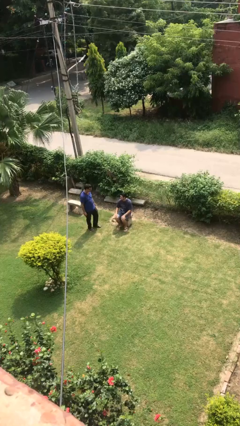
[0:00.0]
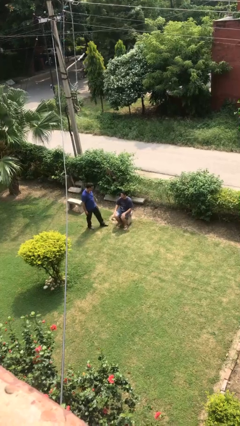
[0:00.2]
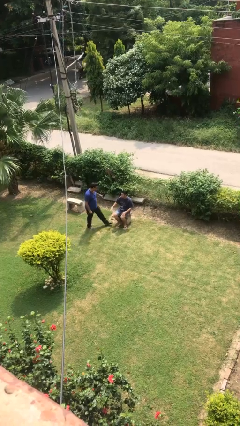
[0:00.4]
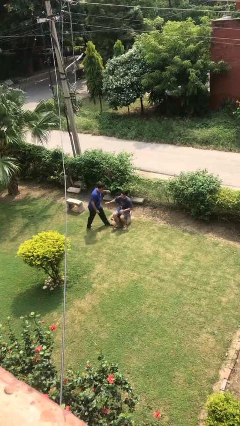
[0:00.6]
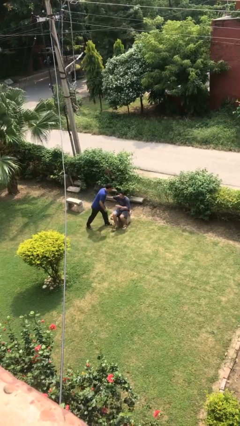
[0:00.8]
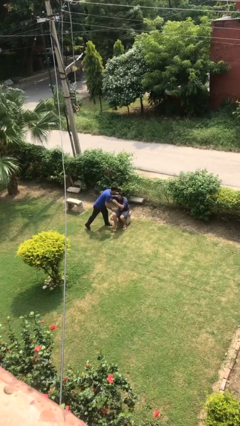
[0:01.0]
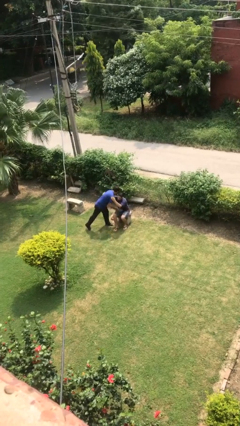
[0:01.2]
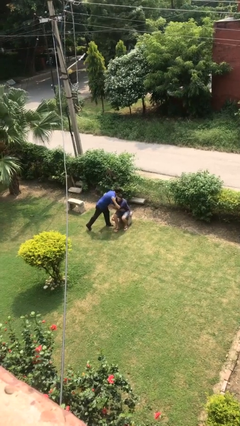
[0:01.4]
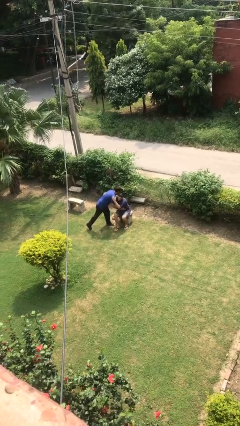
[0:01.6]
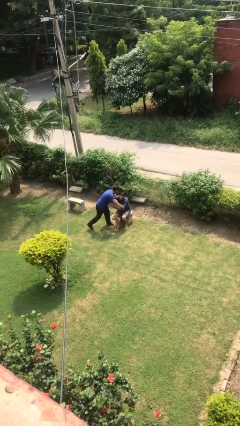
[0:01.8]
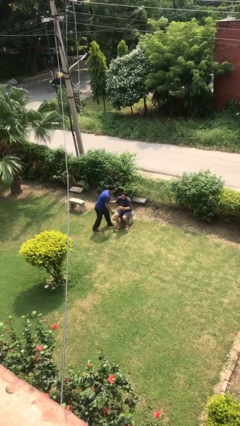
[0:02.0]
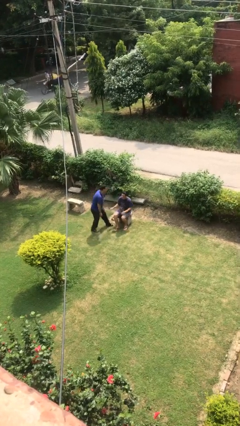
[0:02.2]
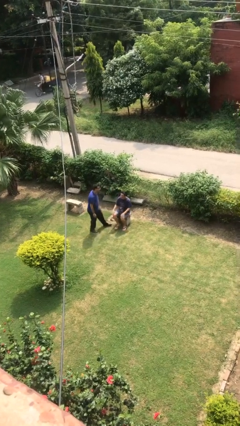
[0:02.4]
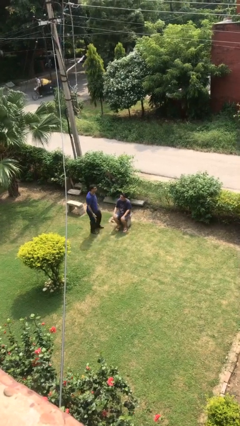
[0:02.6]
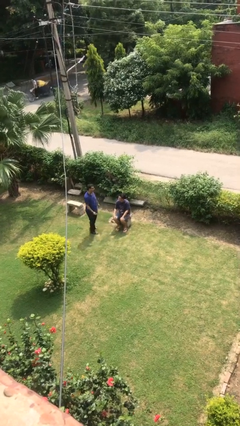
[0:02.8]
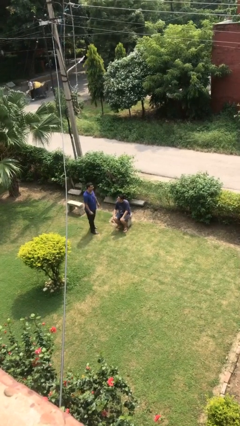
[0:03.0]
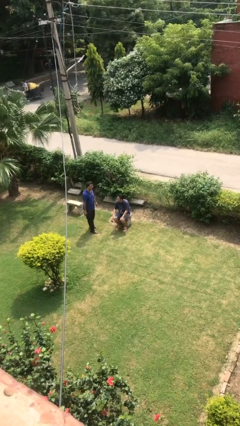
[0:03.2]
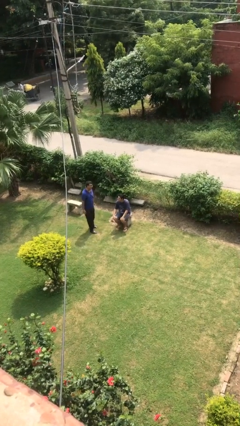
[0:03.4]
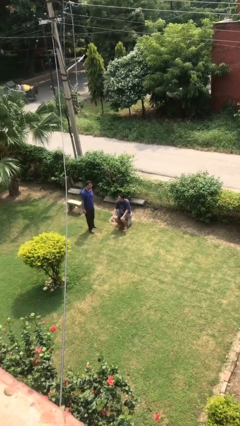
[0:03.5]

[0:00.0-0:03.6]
person embraces person

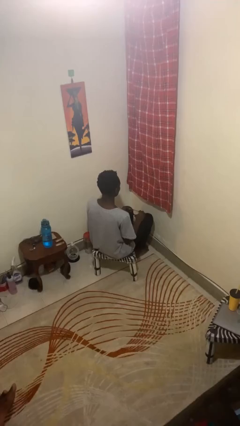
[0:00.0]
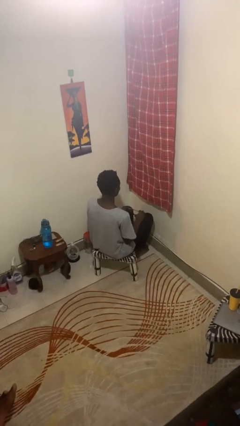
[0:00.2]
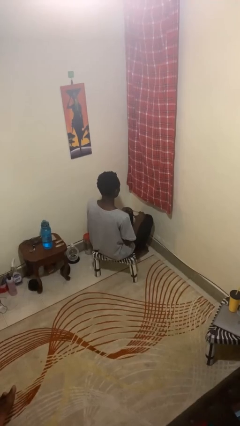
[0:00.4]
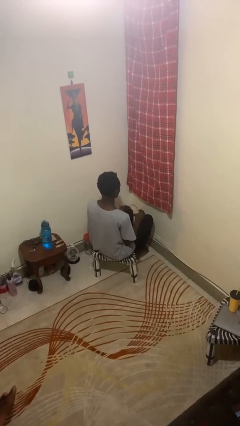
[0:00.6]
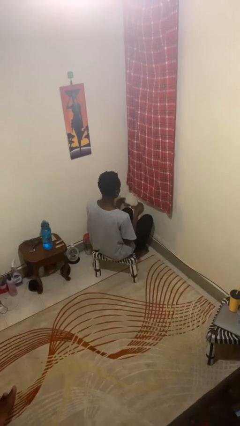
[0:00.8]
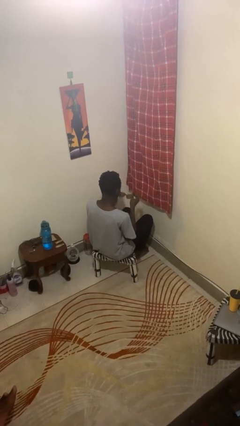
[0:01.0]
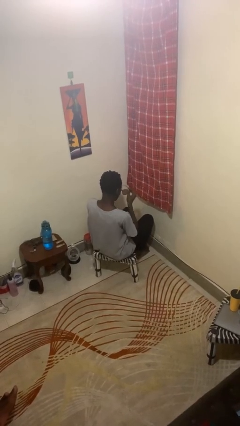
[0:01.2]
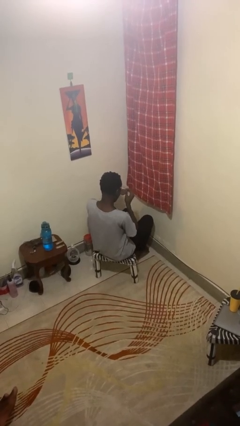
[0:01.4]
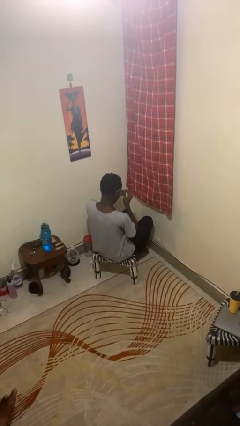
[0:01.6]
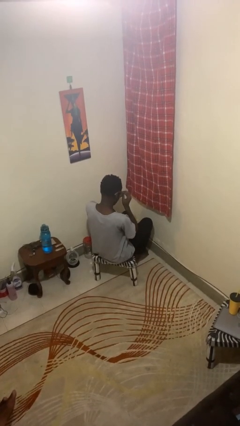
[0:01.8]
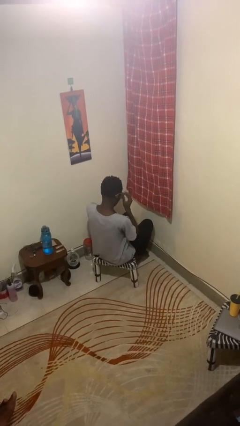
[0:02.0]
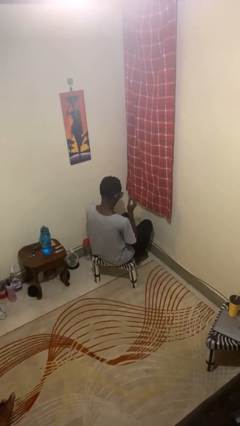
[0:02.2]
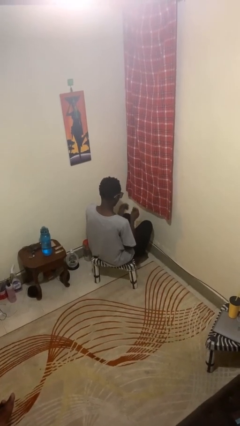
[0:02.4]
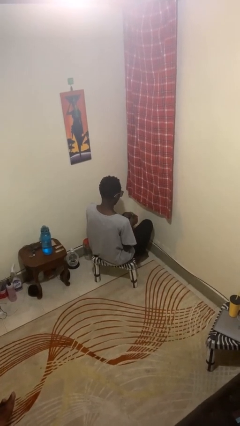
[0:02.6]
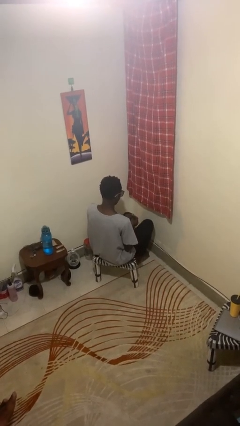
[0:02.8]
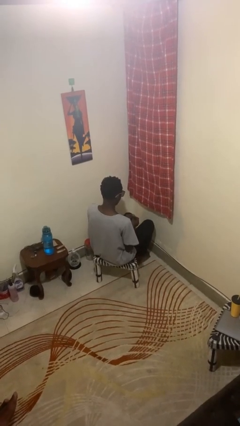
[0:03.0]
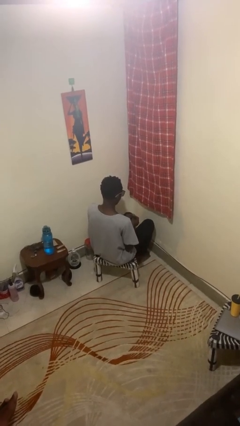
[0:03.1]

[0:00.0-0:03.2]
person puts on glasses

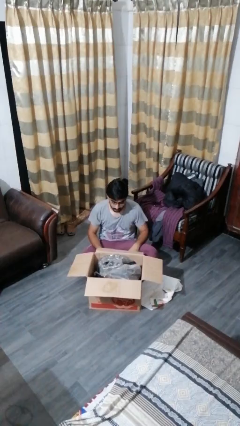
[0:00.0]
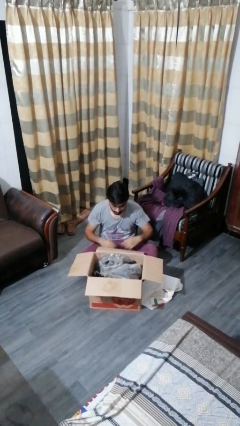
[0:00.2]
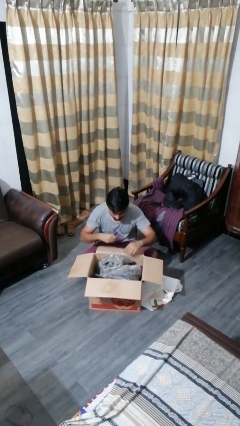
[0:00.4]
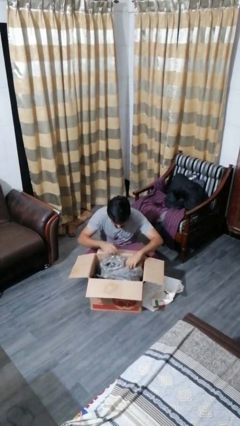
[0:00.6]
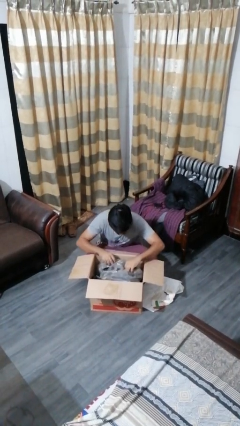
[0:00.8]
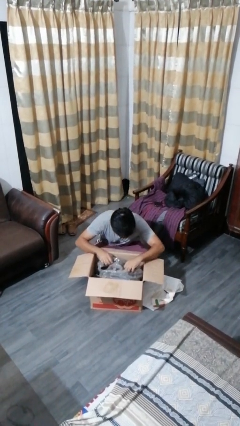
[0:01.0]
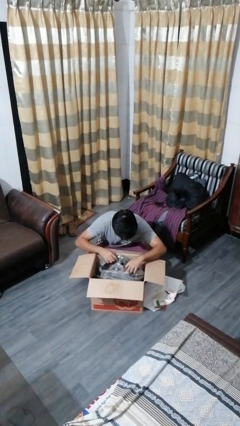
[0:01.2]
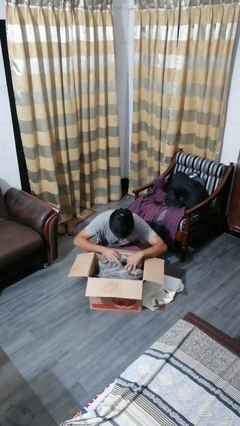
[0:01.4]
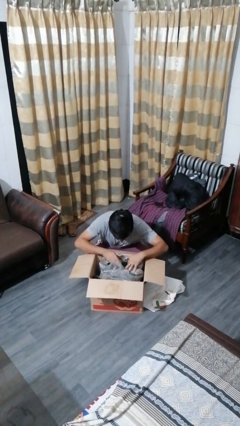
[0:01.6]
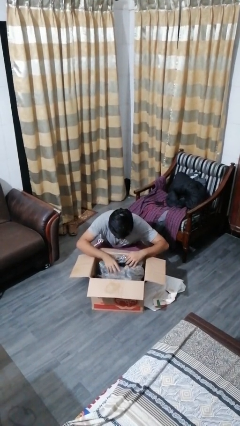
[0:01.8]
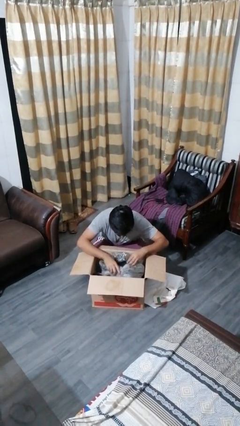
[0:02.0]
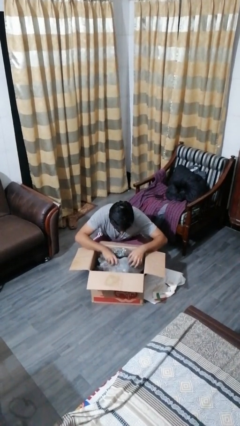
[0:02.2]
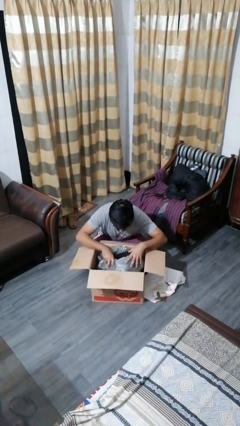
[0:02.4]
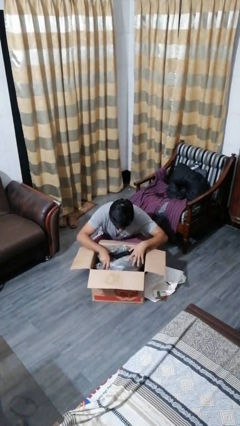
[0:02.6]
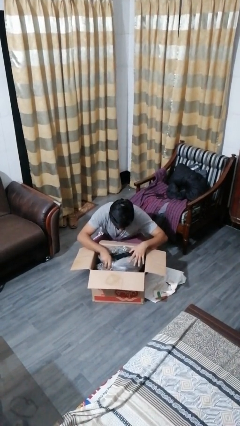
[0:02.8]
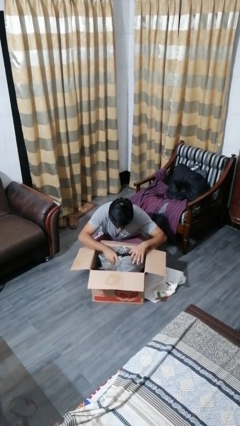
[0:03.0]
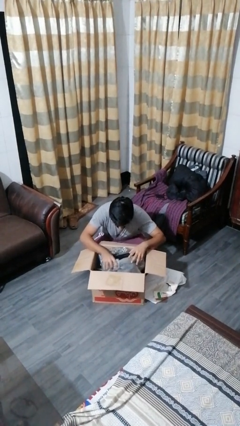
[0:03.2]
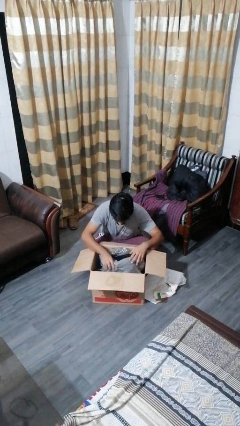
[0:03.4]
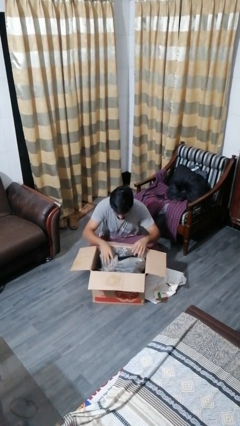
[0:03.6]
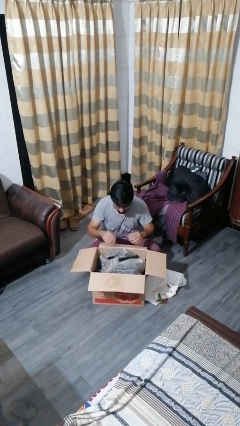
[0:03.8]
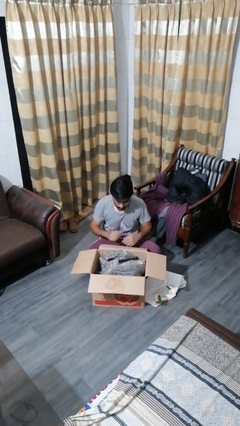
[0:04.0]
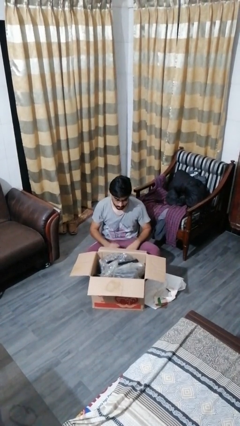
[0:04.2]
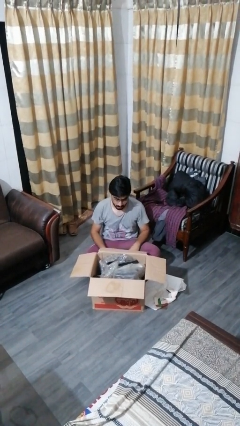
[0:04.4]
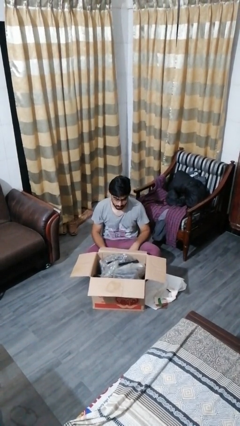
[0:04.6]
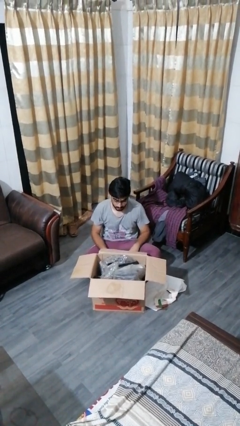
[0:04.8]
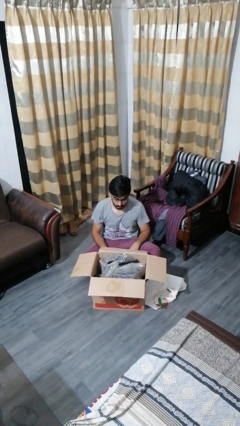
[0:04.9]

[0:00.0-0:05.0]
person searches in box

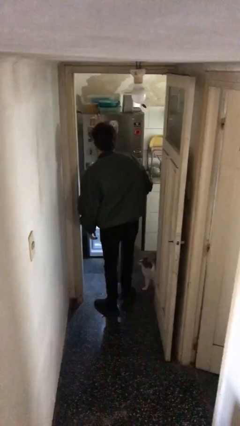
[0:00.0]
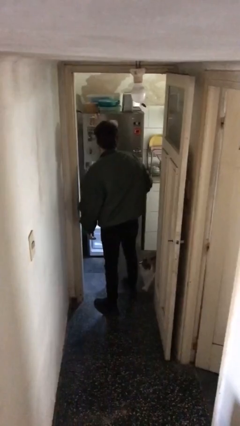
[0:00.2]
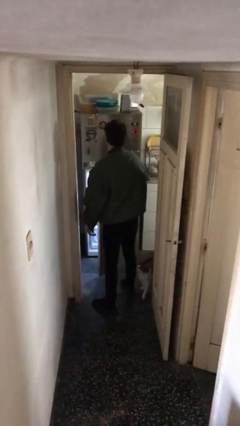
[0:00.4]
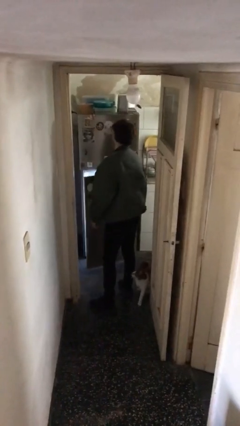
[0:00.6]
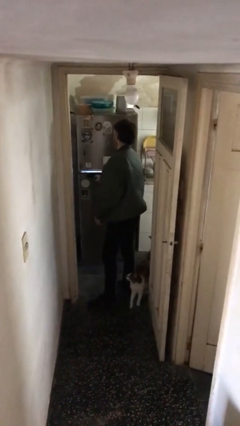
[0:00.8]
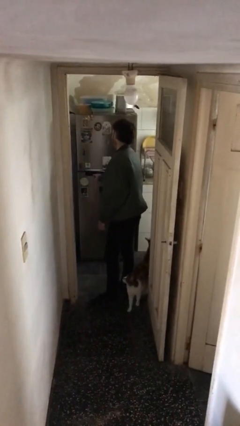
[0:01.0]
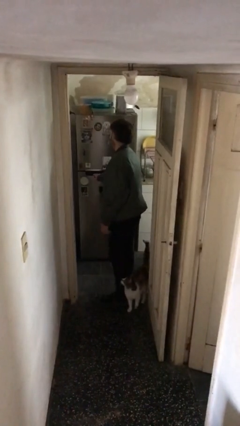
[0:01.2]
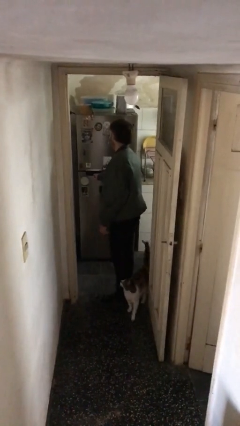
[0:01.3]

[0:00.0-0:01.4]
person closes refrigerator

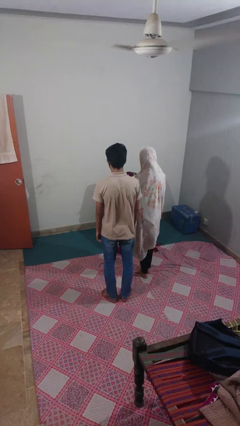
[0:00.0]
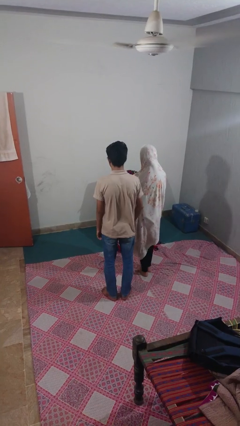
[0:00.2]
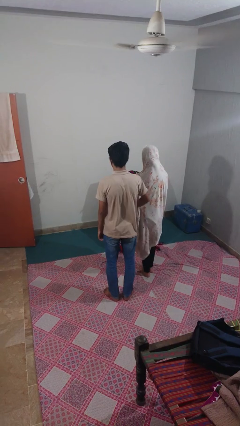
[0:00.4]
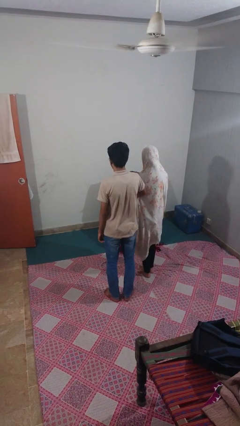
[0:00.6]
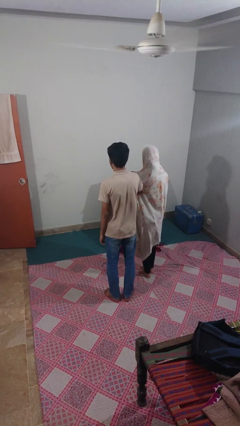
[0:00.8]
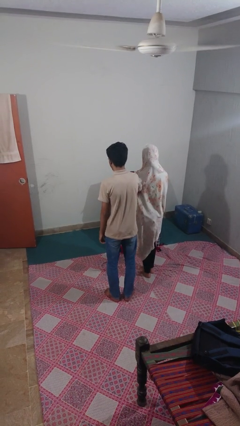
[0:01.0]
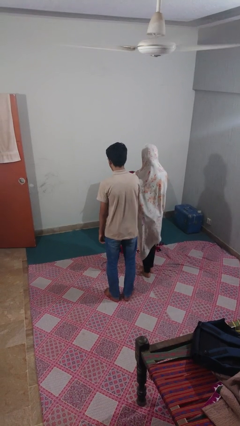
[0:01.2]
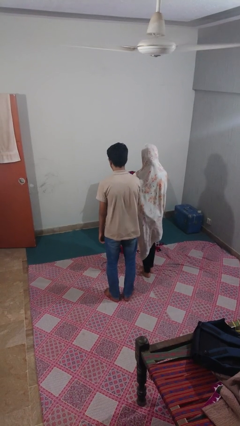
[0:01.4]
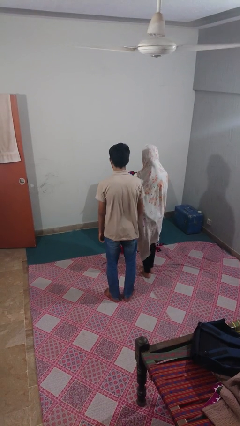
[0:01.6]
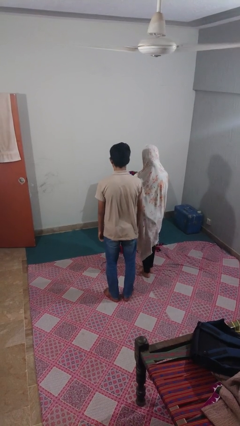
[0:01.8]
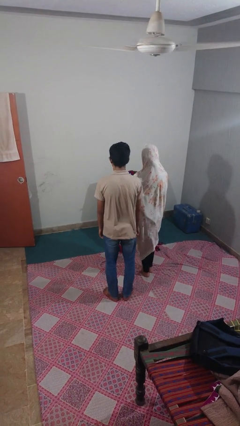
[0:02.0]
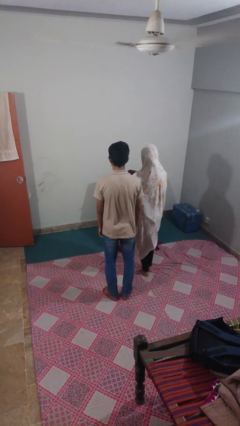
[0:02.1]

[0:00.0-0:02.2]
person nudges person with elbow

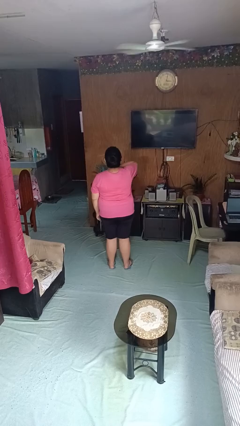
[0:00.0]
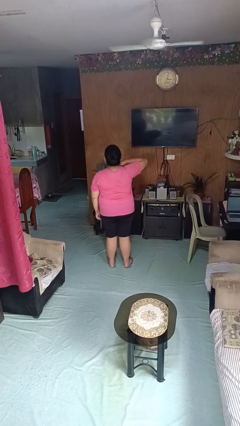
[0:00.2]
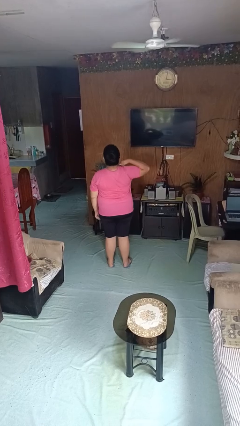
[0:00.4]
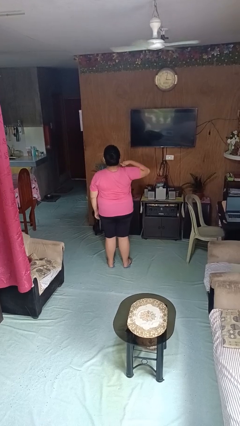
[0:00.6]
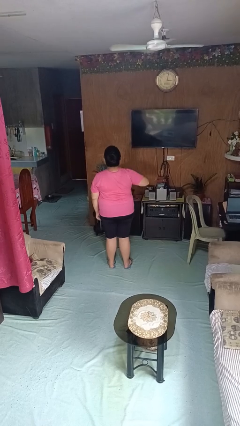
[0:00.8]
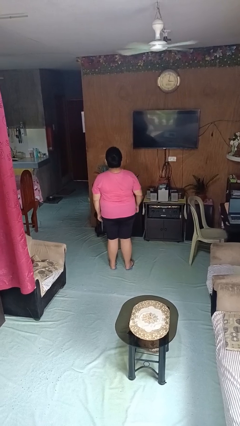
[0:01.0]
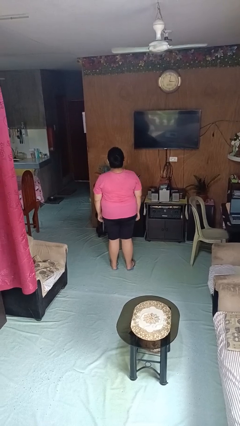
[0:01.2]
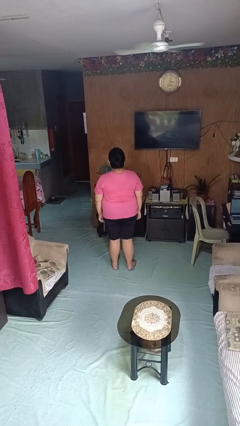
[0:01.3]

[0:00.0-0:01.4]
person gestures cut
